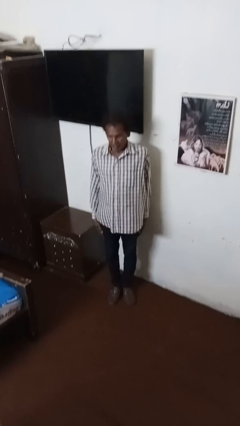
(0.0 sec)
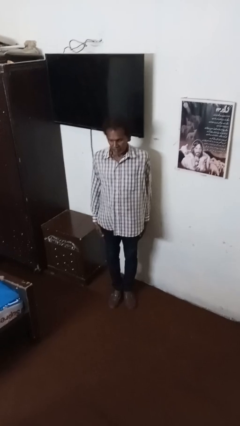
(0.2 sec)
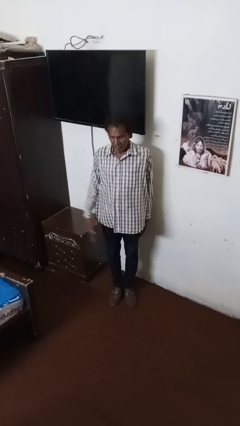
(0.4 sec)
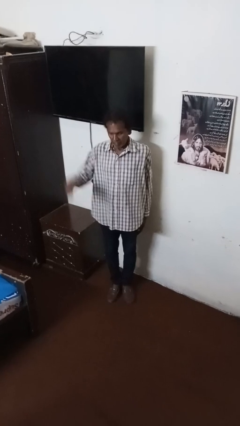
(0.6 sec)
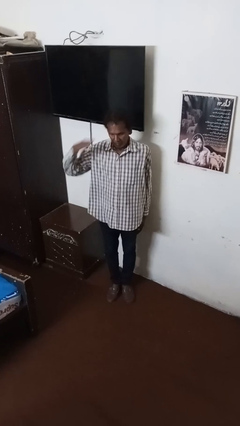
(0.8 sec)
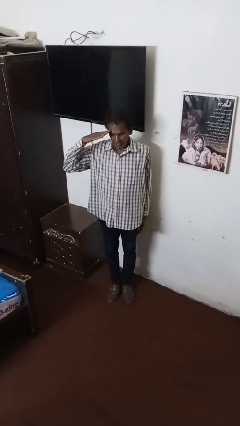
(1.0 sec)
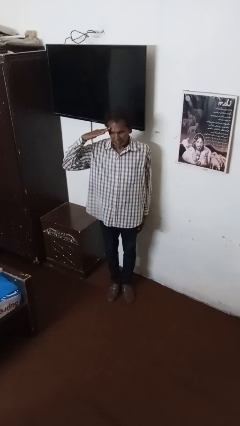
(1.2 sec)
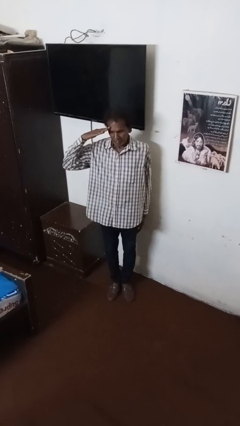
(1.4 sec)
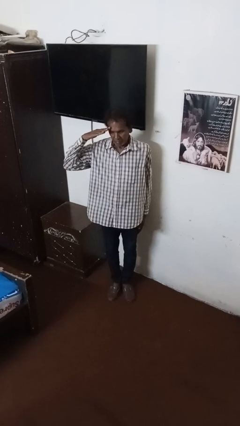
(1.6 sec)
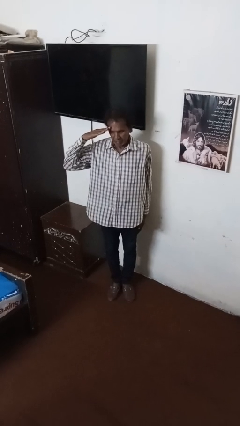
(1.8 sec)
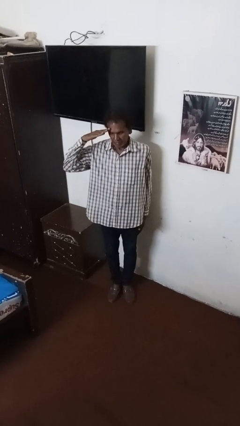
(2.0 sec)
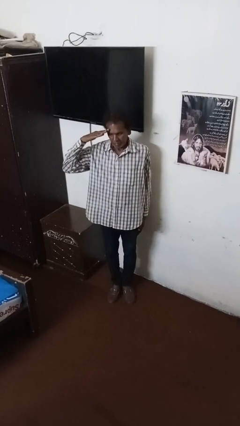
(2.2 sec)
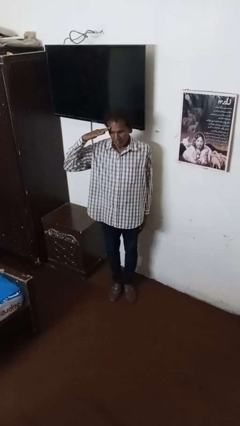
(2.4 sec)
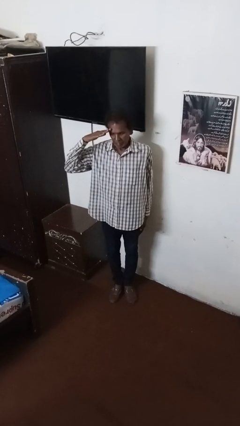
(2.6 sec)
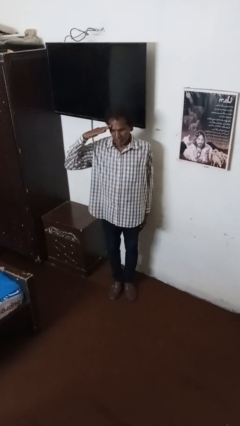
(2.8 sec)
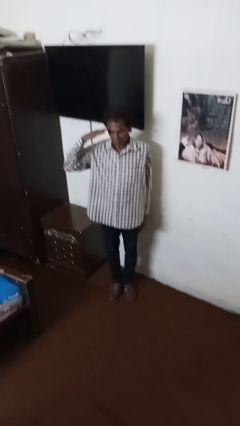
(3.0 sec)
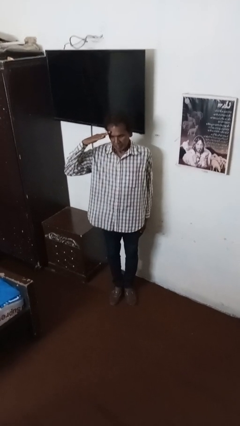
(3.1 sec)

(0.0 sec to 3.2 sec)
person salutes

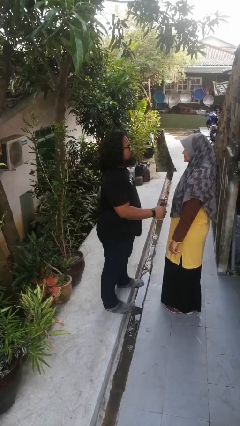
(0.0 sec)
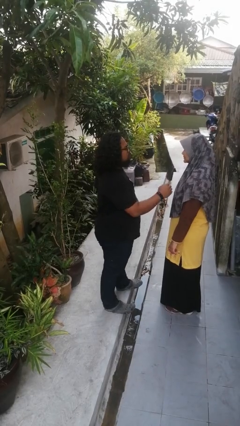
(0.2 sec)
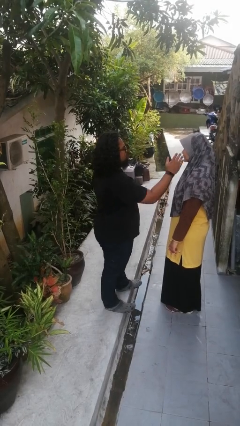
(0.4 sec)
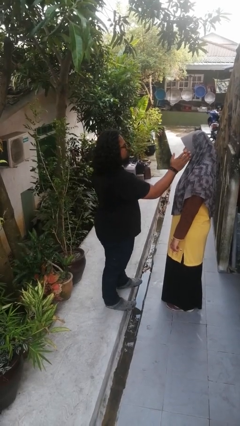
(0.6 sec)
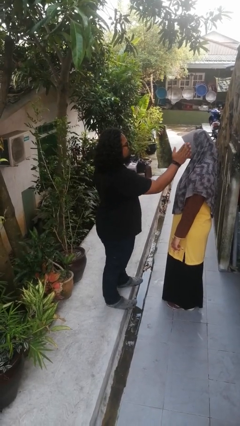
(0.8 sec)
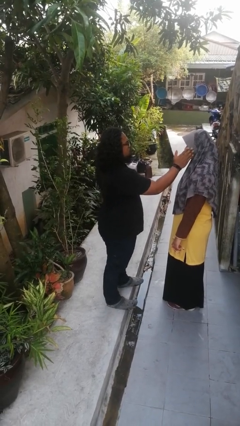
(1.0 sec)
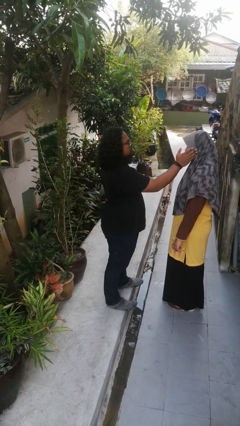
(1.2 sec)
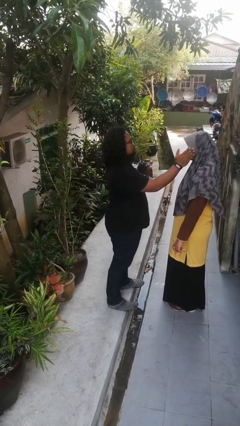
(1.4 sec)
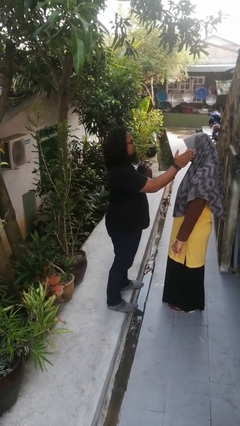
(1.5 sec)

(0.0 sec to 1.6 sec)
person touches face of person

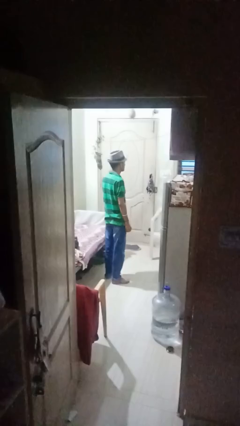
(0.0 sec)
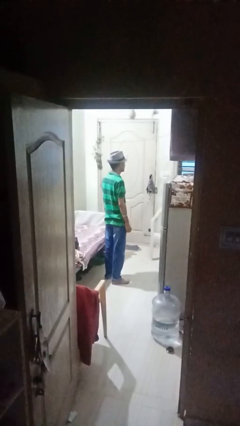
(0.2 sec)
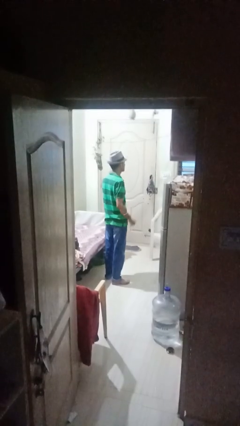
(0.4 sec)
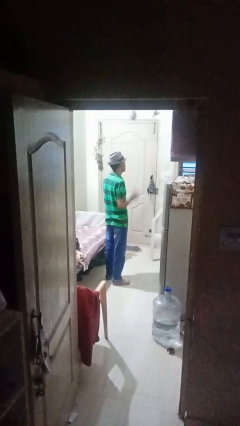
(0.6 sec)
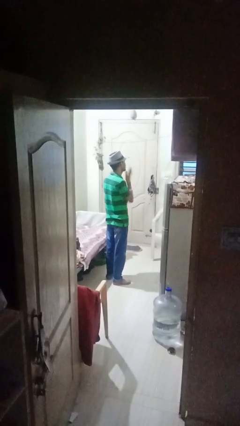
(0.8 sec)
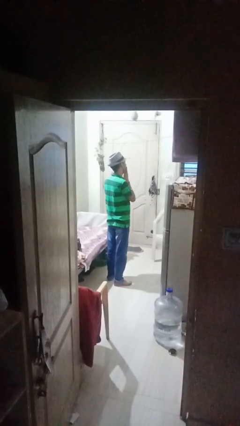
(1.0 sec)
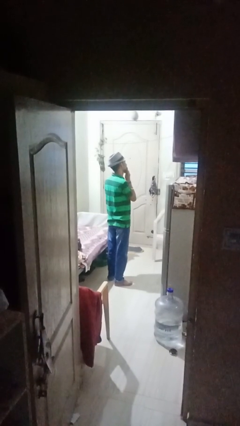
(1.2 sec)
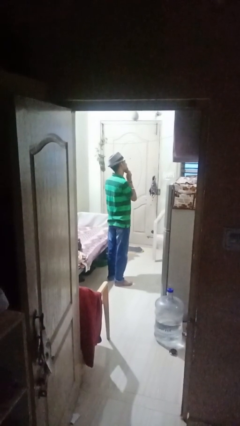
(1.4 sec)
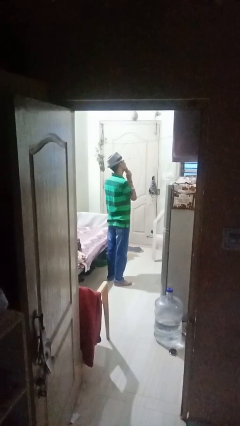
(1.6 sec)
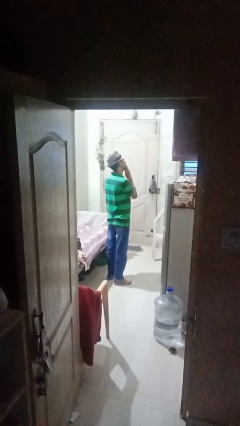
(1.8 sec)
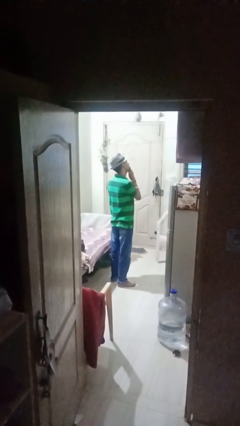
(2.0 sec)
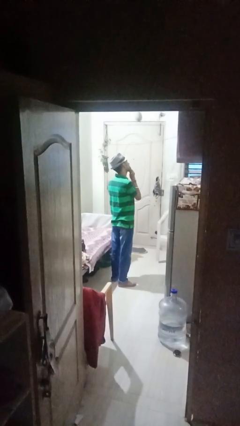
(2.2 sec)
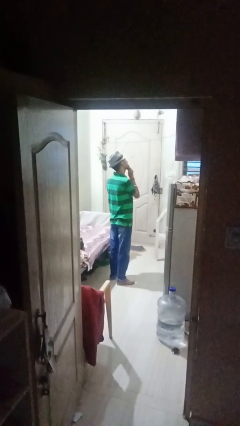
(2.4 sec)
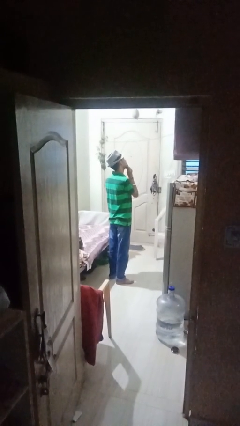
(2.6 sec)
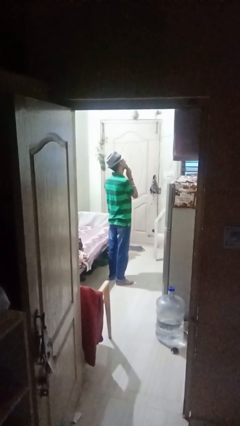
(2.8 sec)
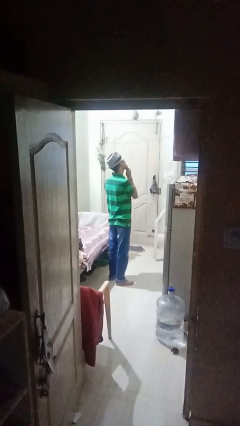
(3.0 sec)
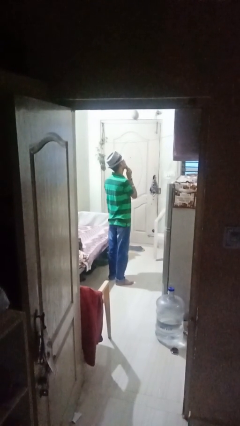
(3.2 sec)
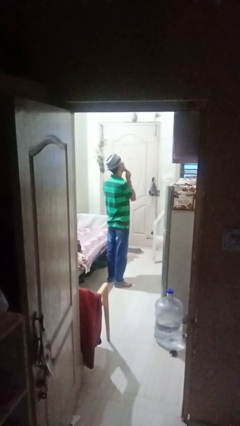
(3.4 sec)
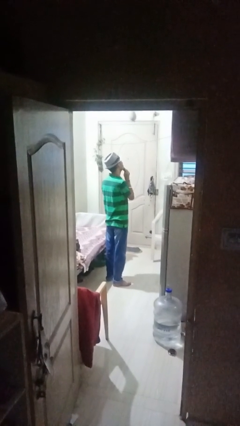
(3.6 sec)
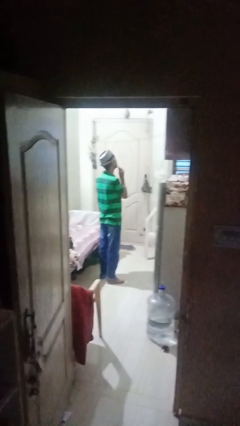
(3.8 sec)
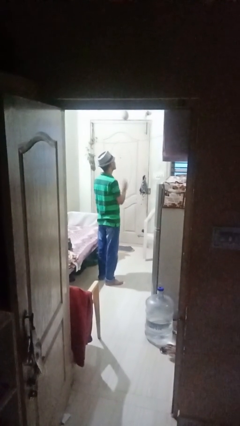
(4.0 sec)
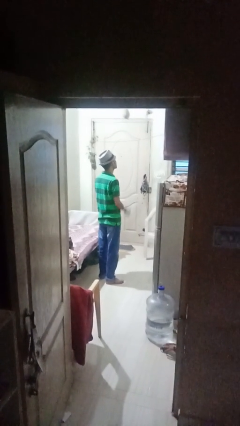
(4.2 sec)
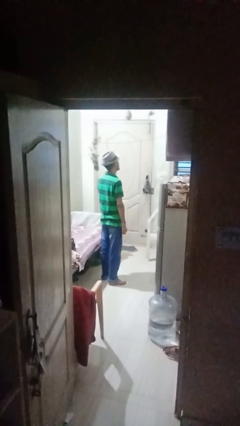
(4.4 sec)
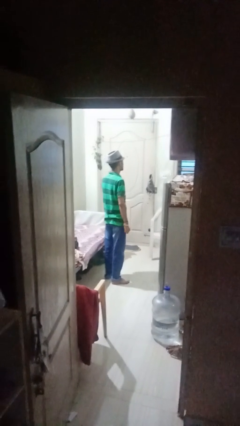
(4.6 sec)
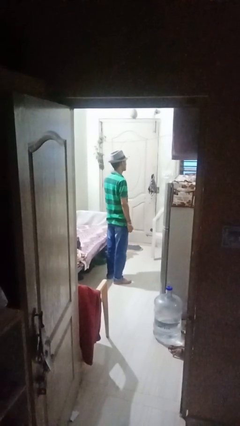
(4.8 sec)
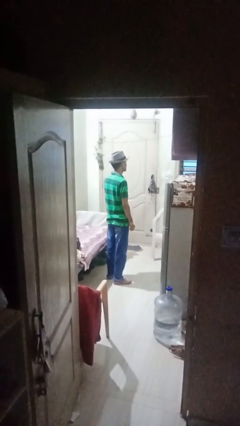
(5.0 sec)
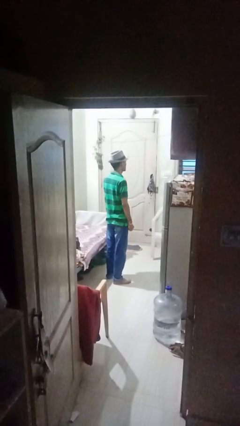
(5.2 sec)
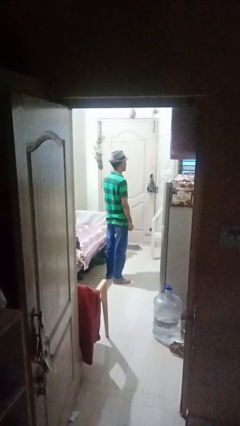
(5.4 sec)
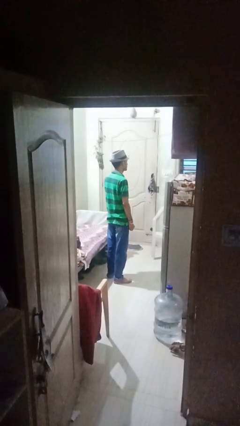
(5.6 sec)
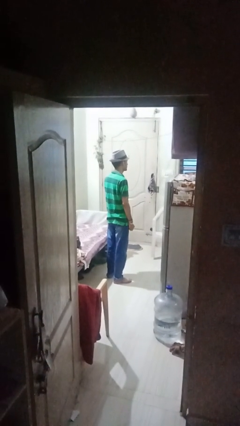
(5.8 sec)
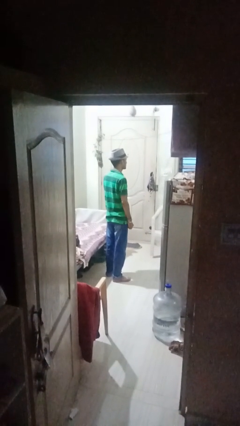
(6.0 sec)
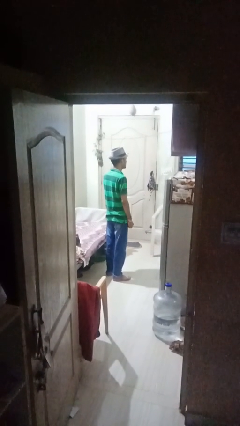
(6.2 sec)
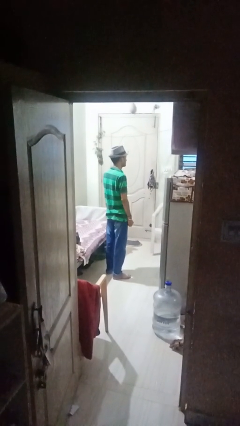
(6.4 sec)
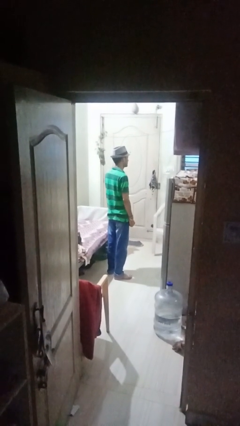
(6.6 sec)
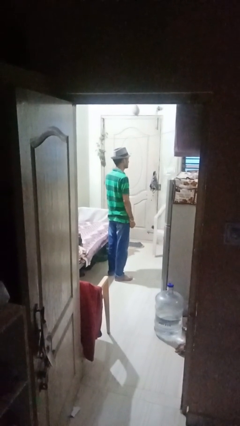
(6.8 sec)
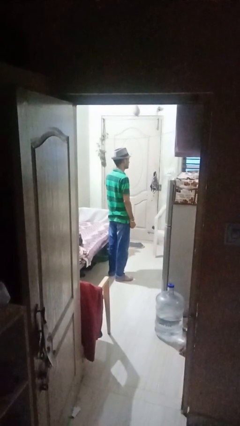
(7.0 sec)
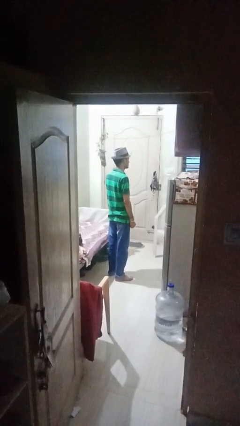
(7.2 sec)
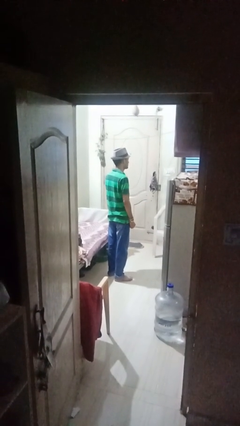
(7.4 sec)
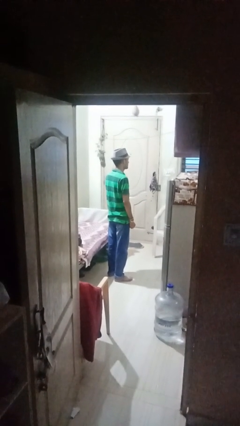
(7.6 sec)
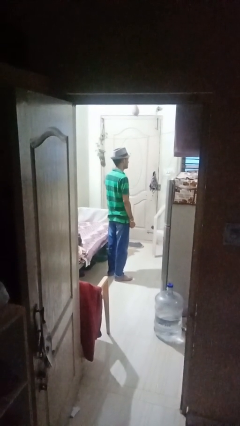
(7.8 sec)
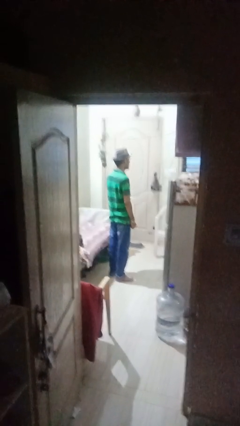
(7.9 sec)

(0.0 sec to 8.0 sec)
person strokes chin

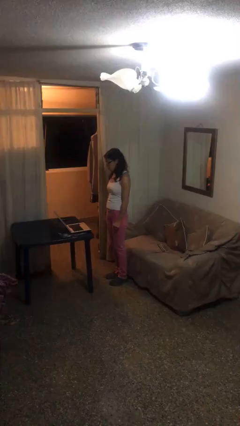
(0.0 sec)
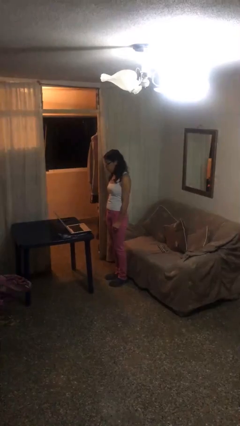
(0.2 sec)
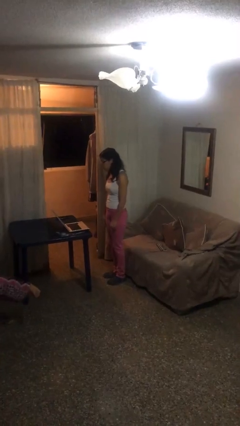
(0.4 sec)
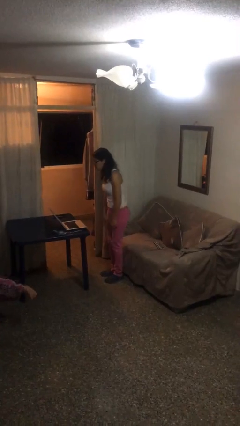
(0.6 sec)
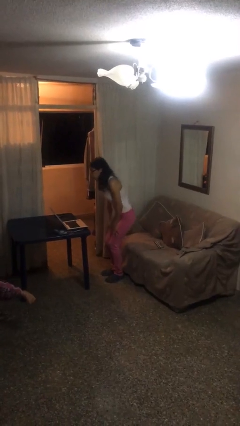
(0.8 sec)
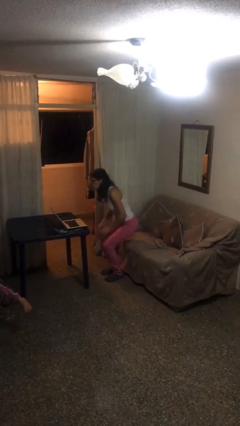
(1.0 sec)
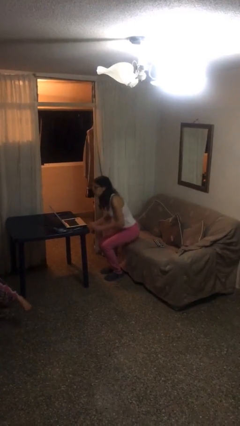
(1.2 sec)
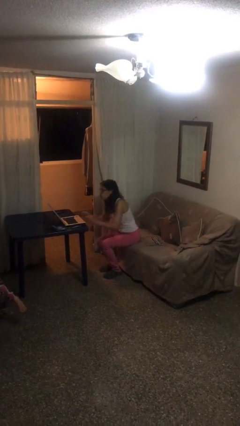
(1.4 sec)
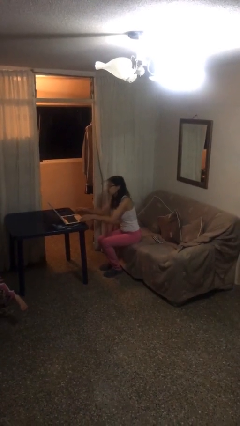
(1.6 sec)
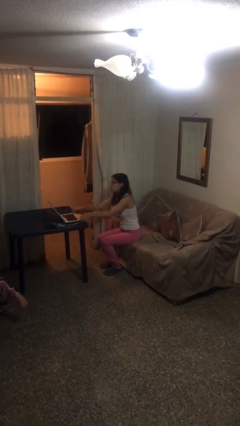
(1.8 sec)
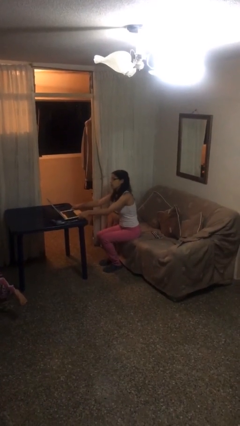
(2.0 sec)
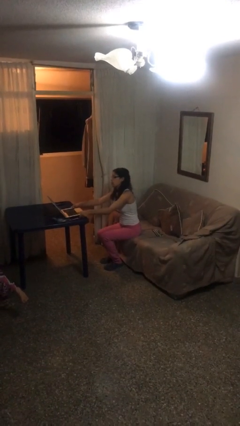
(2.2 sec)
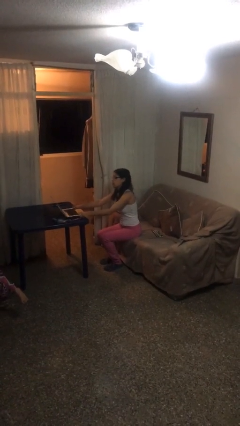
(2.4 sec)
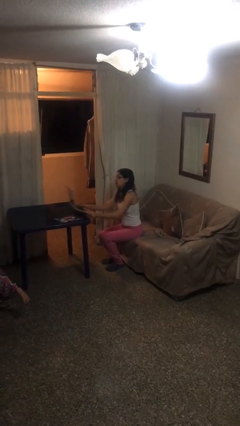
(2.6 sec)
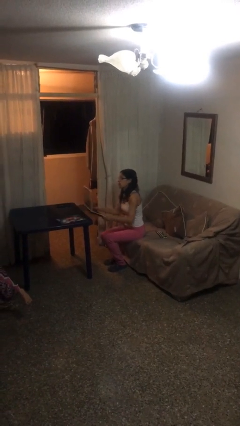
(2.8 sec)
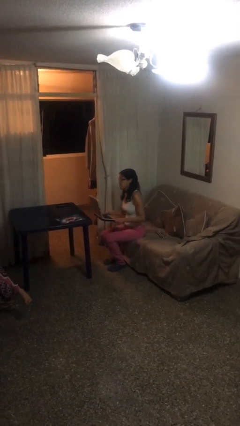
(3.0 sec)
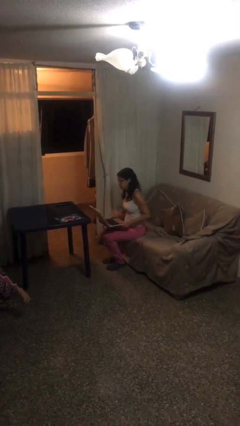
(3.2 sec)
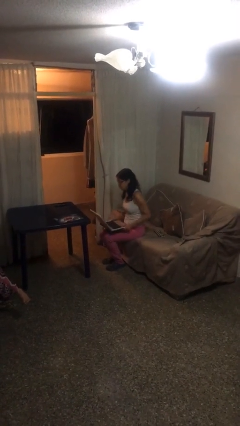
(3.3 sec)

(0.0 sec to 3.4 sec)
person sits down

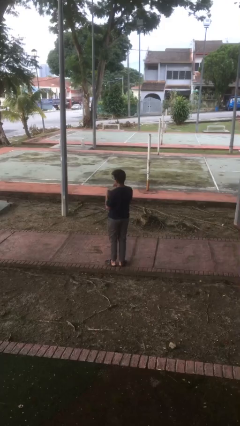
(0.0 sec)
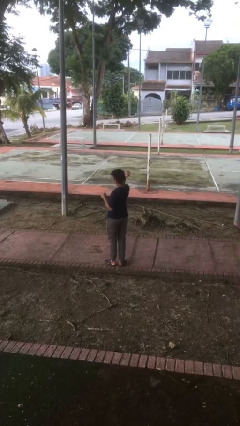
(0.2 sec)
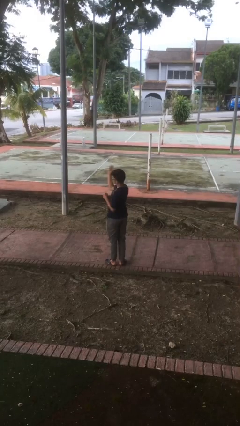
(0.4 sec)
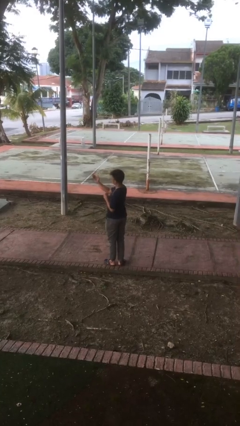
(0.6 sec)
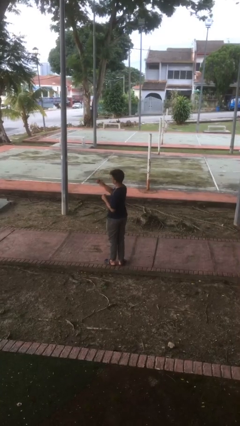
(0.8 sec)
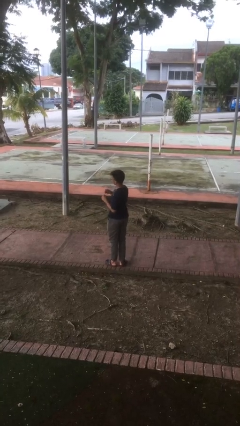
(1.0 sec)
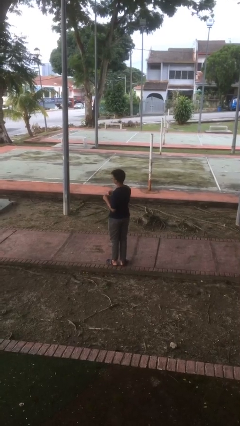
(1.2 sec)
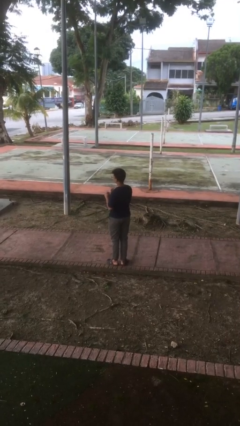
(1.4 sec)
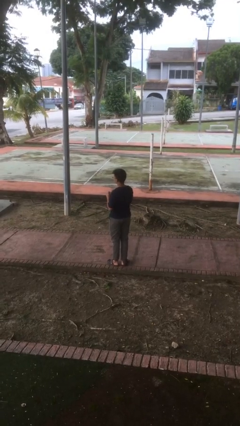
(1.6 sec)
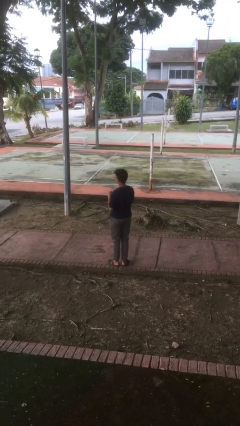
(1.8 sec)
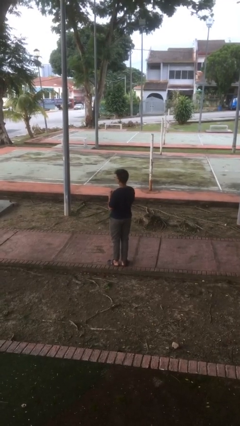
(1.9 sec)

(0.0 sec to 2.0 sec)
person karate chop
